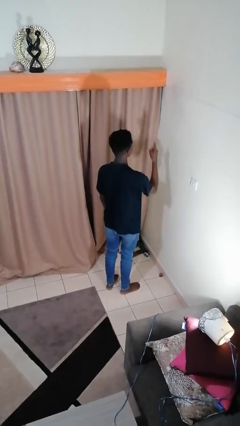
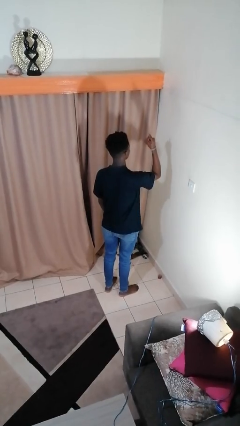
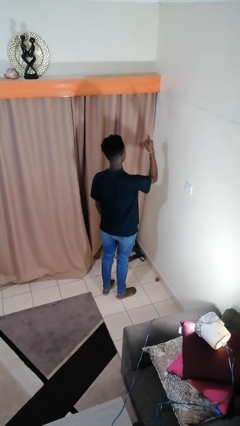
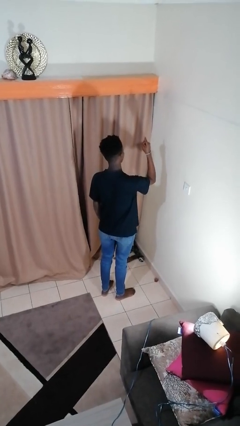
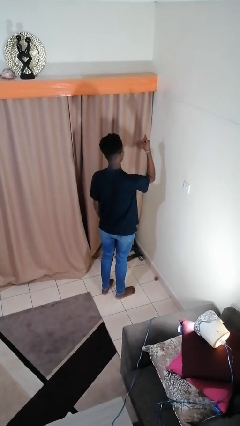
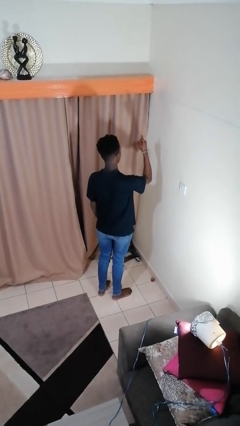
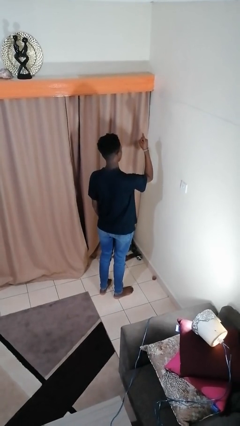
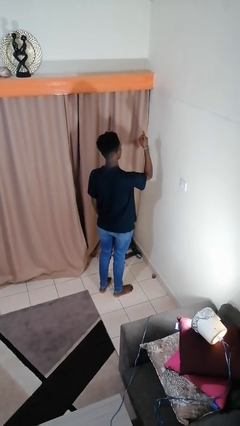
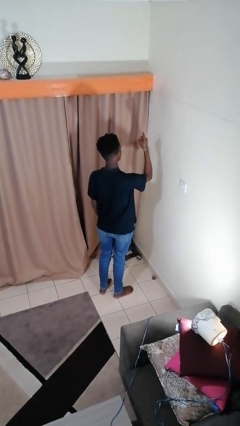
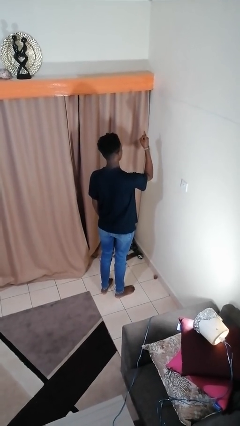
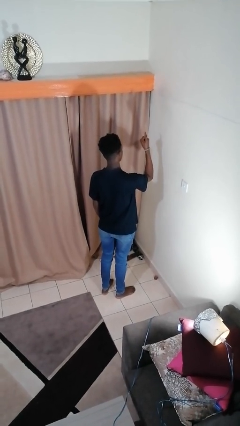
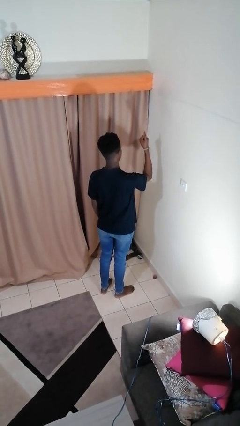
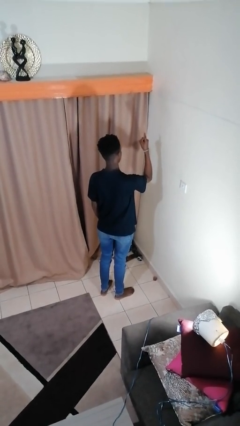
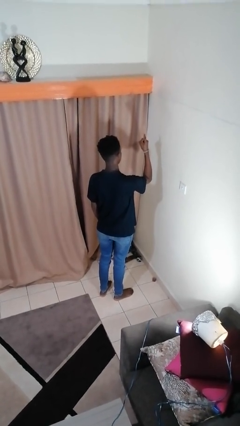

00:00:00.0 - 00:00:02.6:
person gestures number one

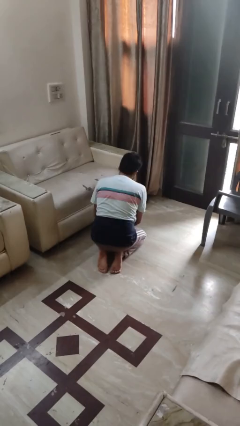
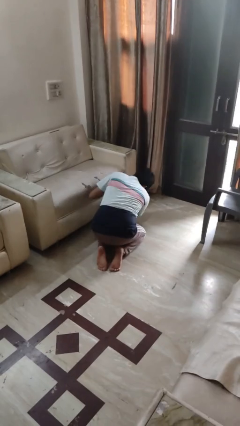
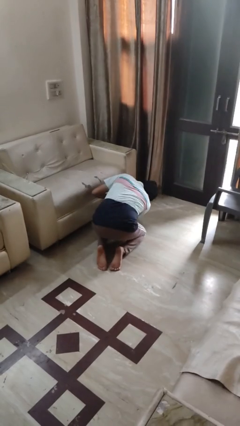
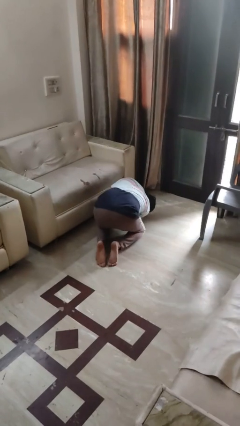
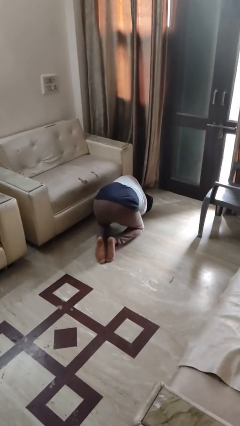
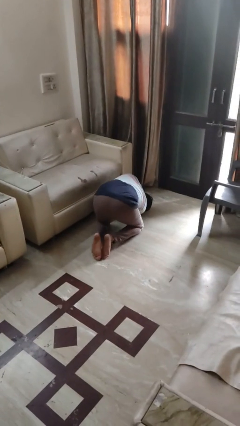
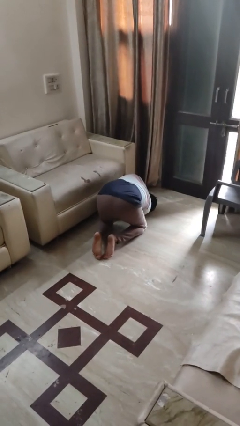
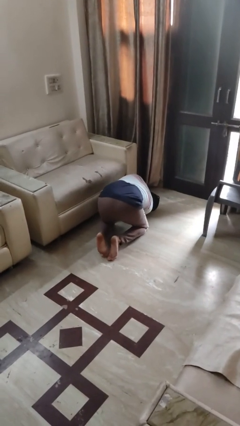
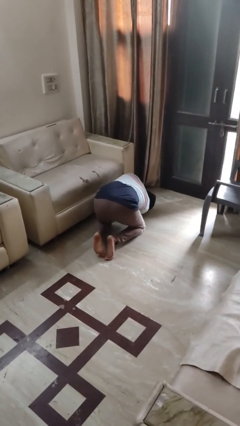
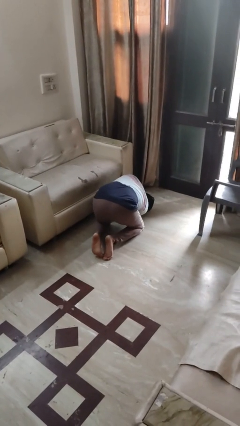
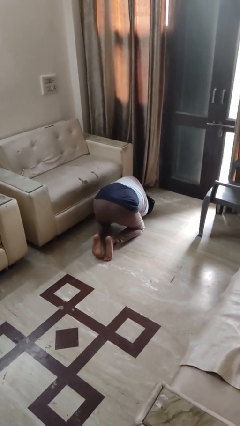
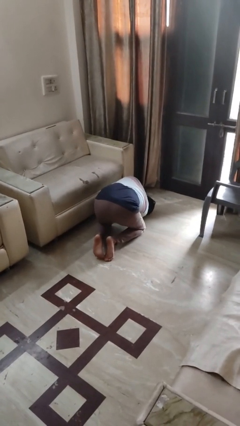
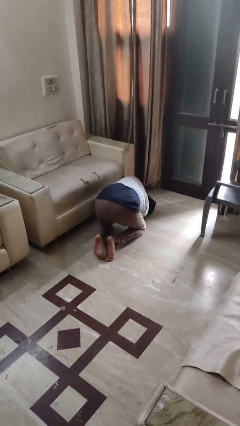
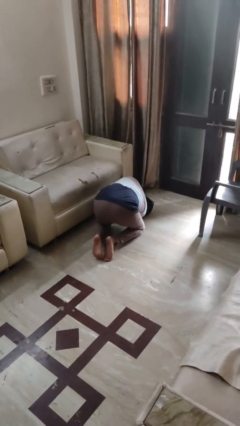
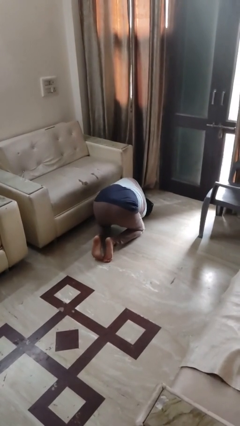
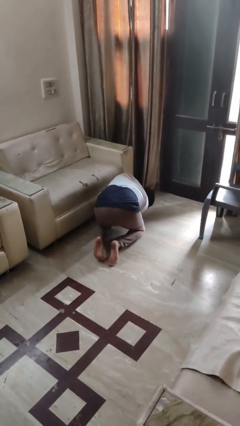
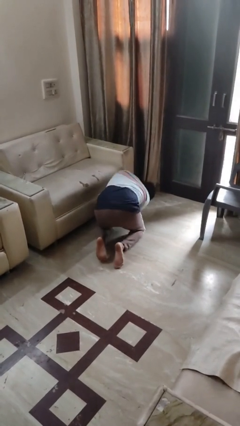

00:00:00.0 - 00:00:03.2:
person searches under couch

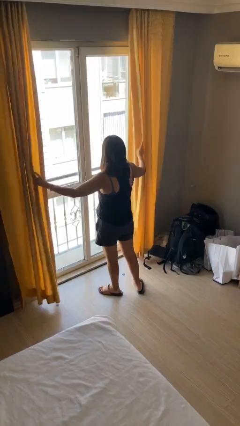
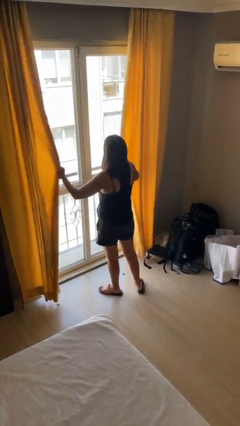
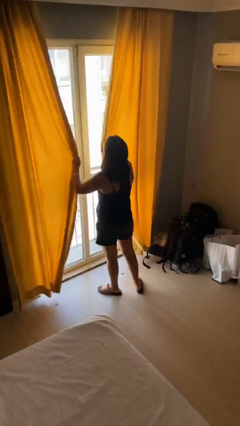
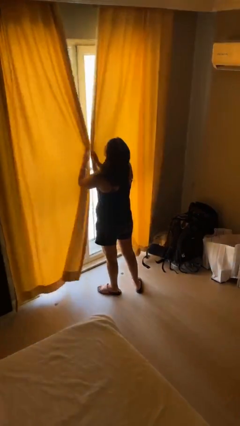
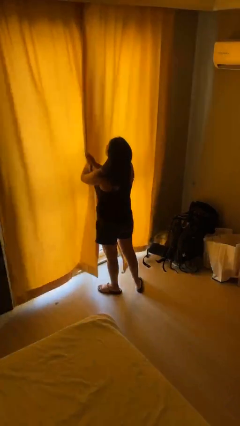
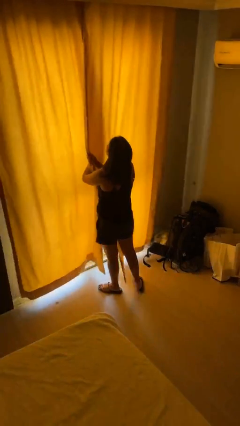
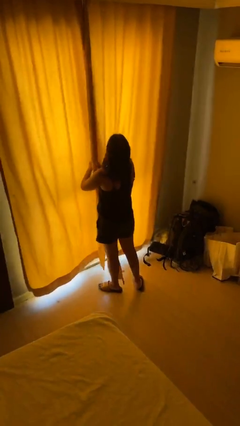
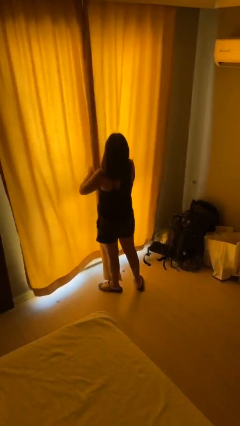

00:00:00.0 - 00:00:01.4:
person closes curtains

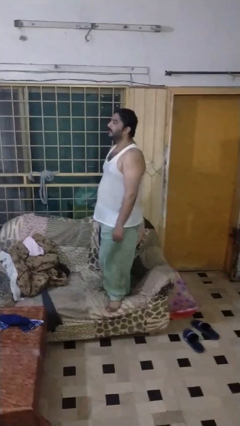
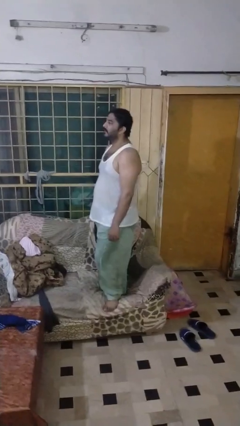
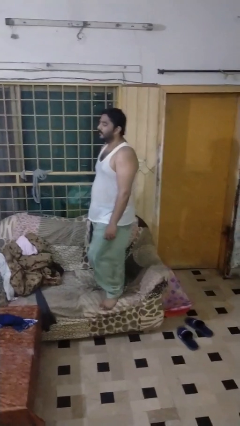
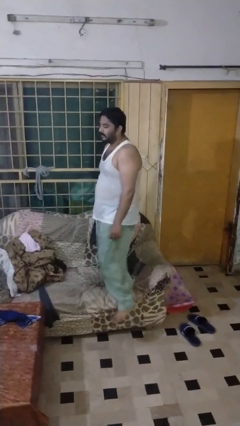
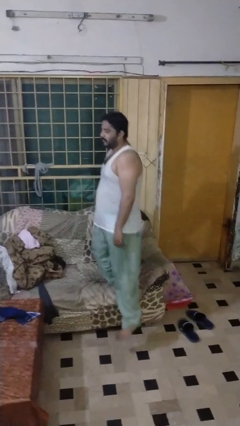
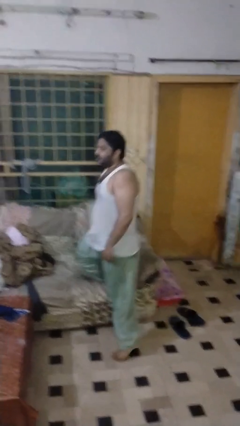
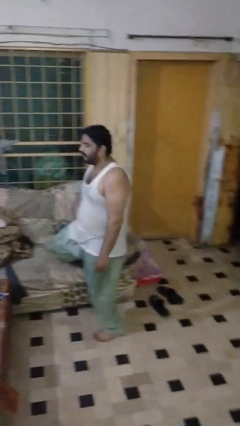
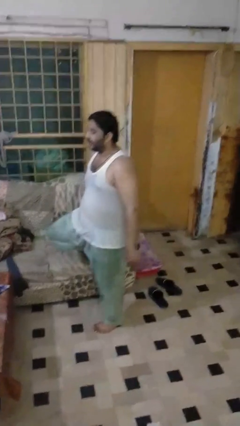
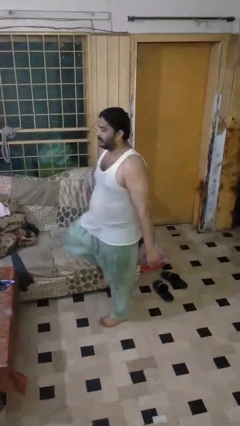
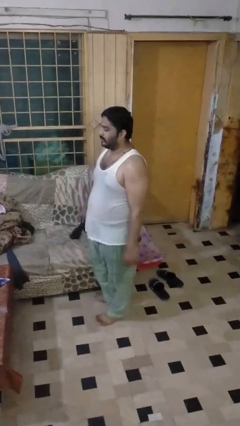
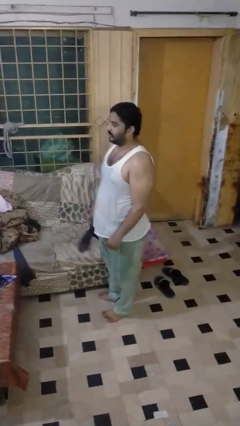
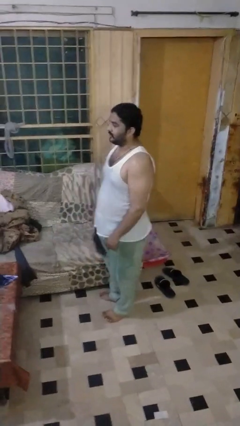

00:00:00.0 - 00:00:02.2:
person climbs off couch

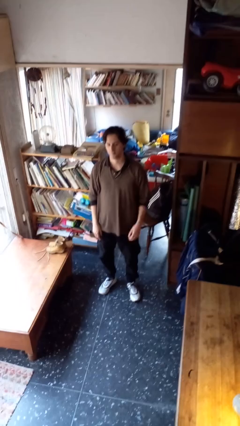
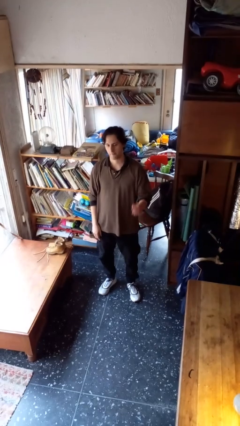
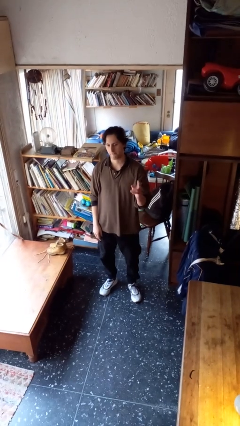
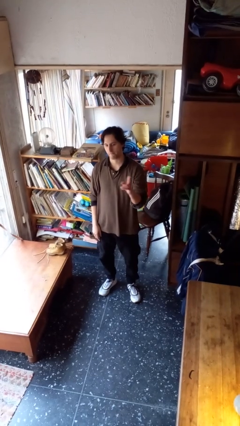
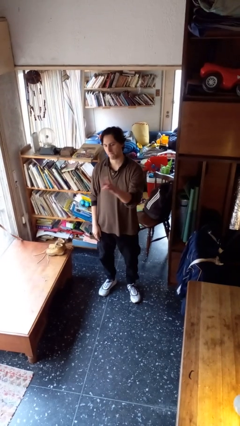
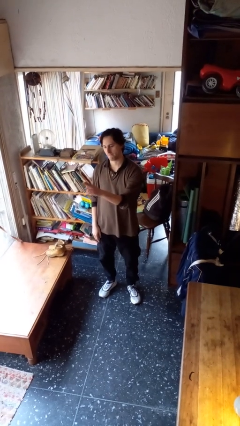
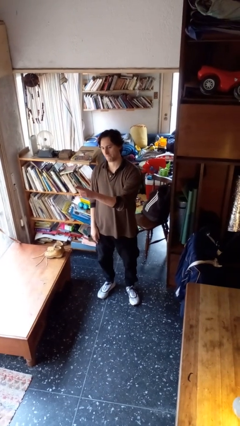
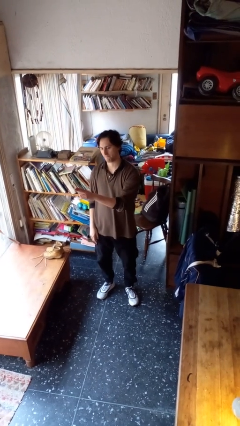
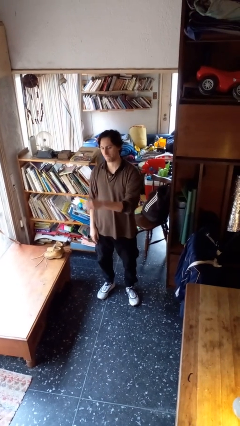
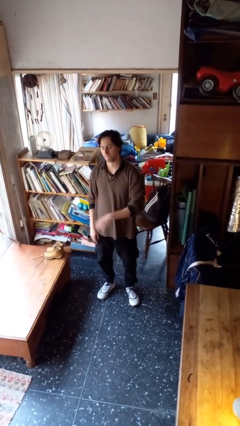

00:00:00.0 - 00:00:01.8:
person gestures swipe right

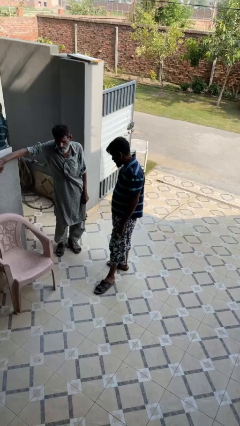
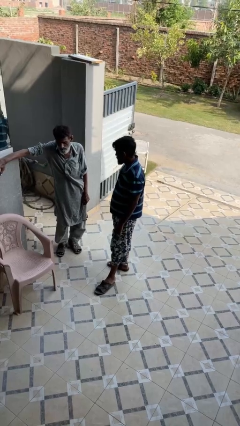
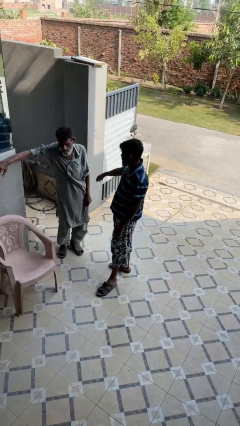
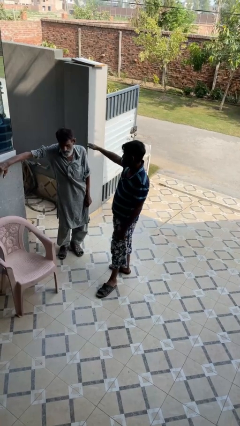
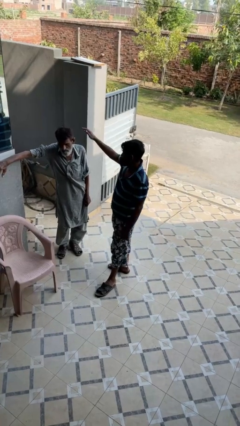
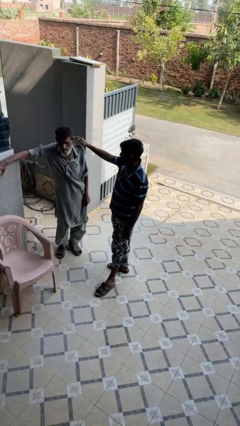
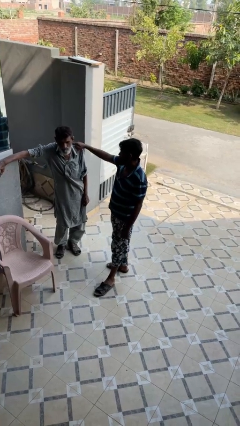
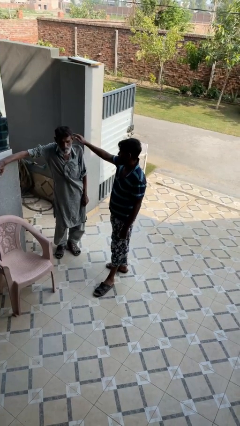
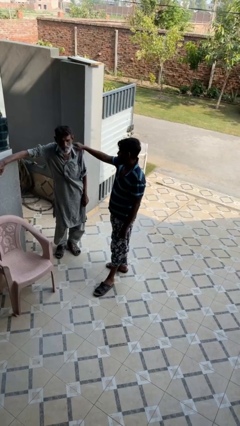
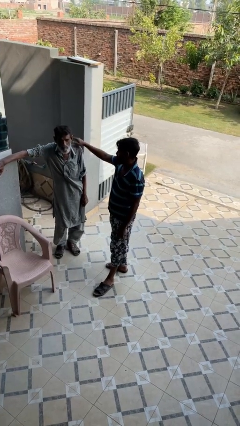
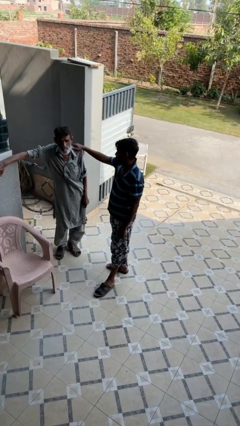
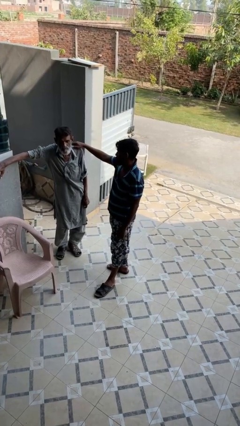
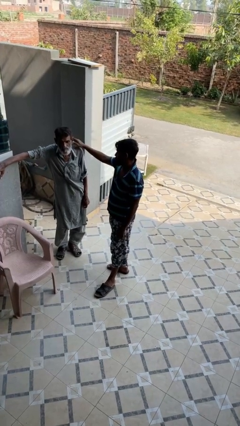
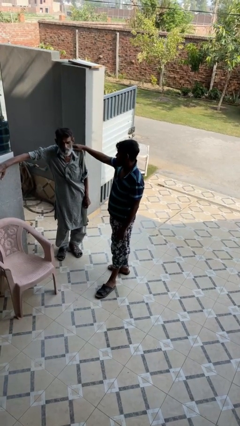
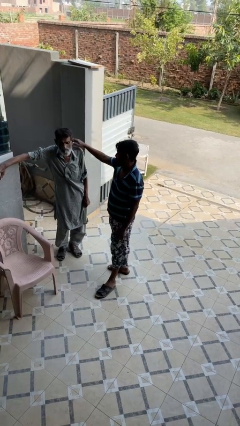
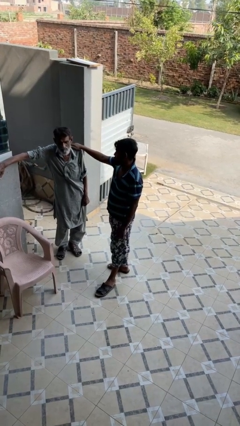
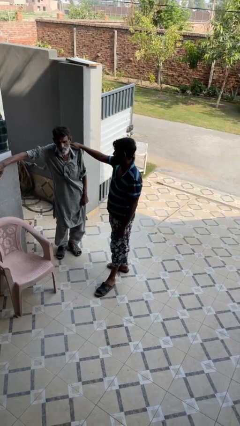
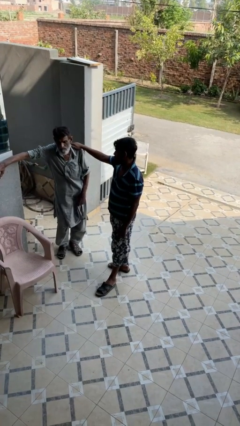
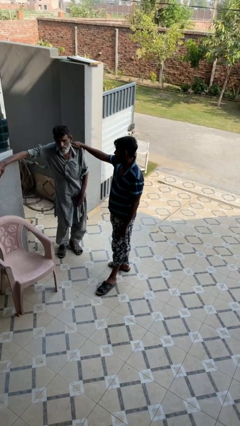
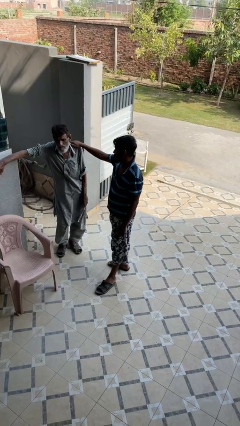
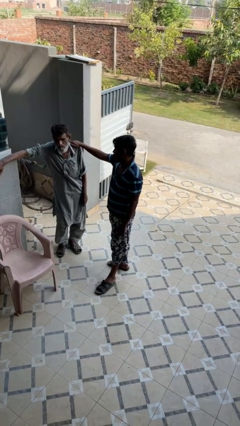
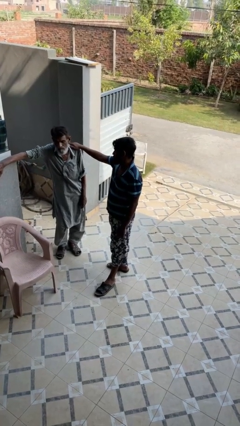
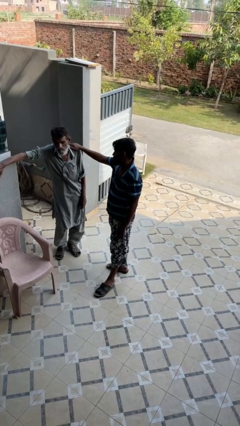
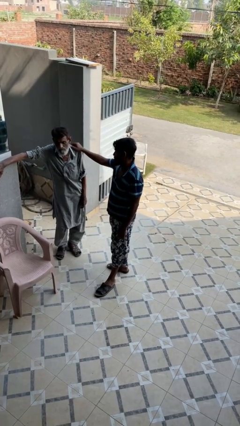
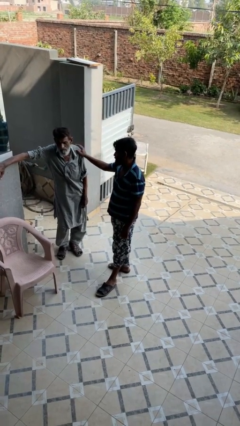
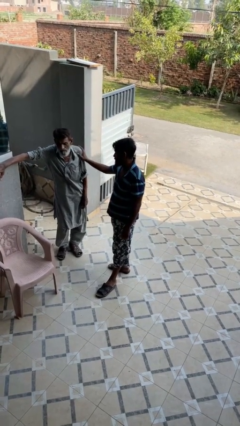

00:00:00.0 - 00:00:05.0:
person pounds shoulders of person

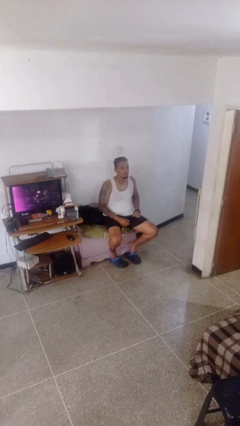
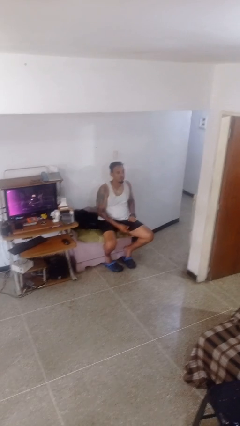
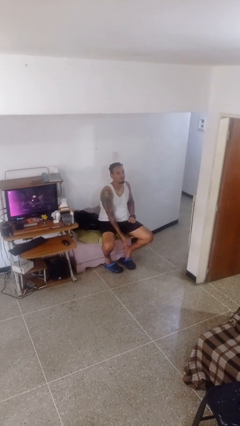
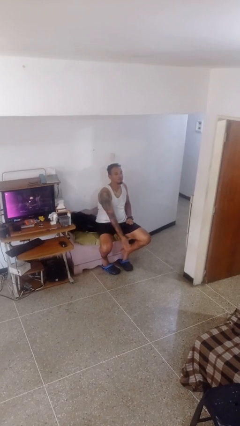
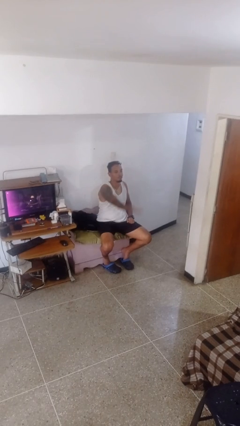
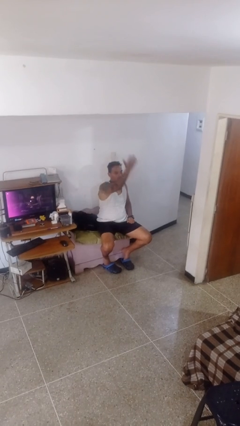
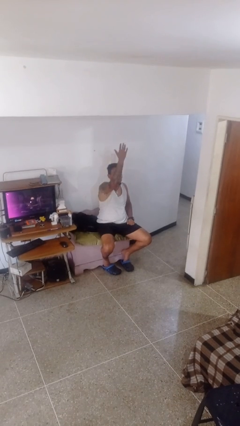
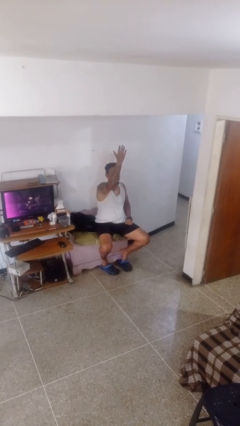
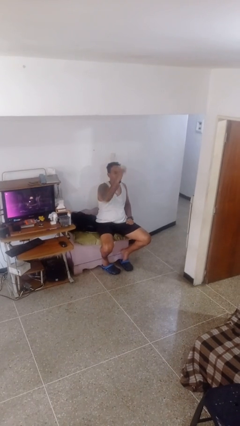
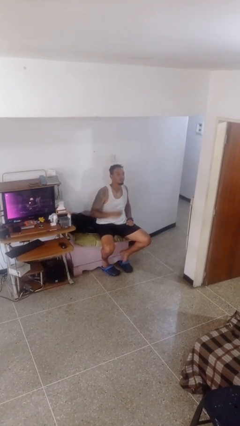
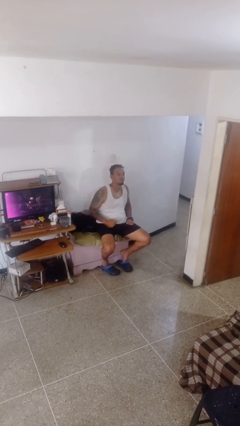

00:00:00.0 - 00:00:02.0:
person gestures swipe up
